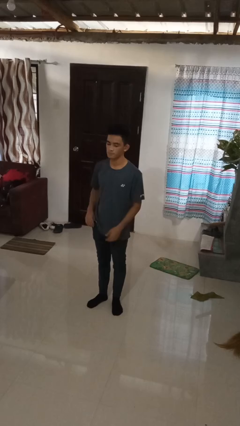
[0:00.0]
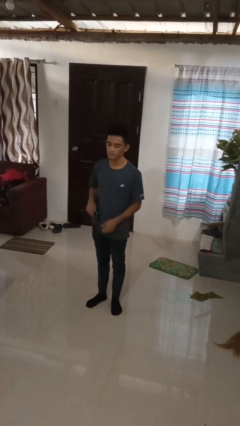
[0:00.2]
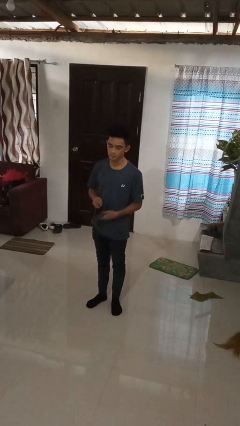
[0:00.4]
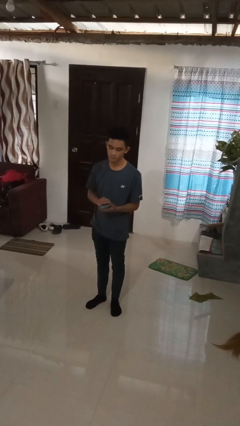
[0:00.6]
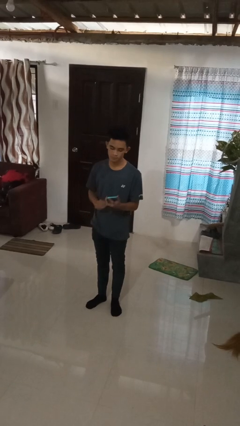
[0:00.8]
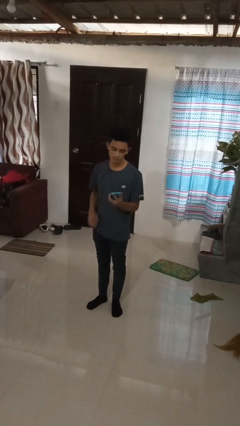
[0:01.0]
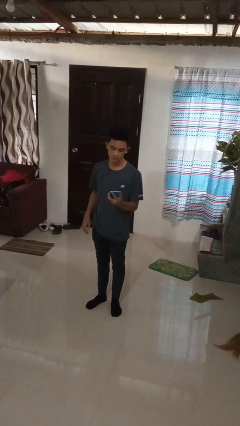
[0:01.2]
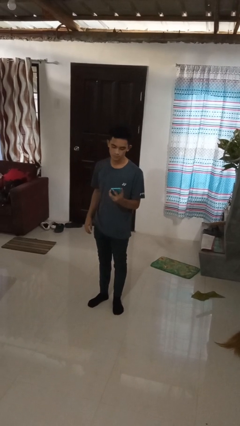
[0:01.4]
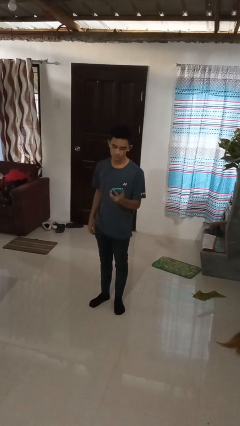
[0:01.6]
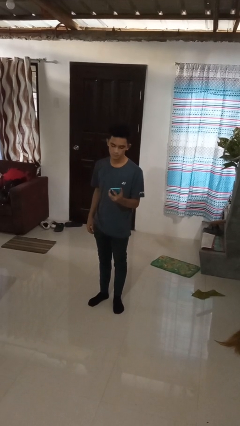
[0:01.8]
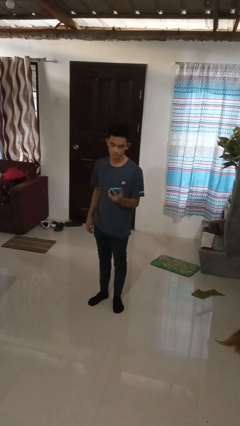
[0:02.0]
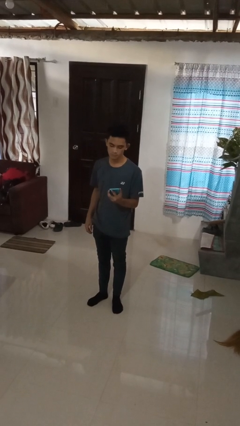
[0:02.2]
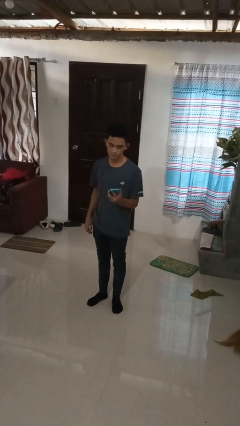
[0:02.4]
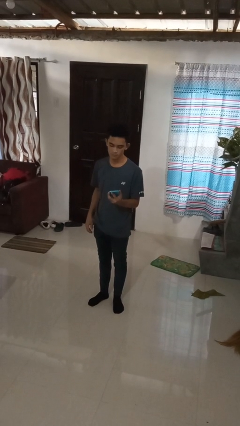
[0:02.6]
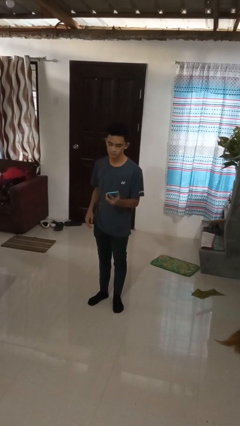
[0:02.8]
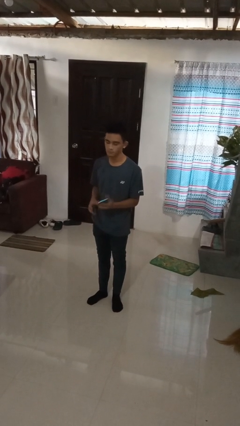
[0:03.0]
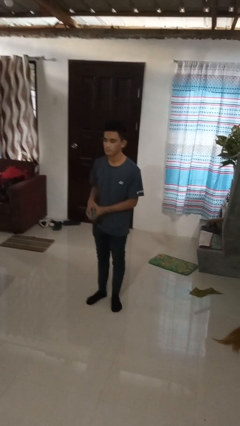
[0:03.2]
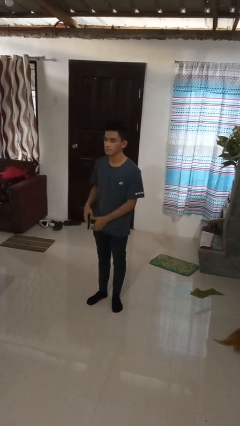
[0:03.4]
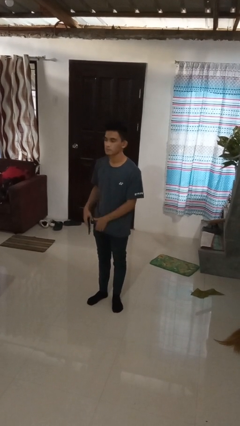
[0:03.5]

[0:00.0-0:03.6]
person takes phone from pocket

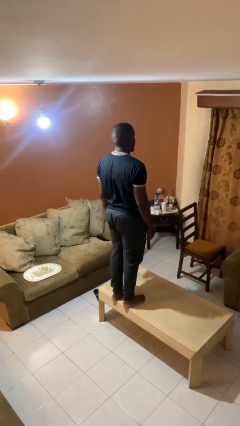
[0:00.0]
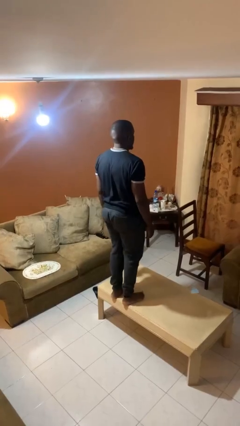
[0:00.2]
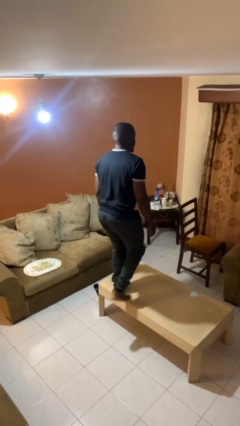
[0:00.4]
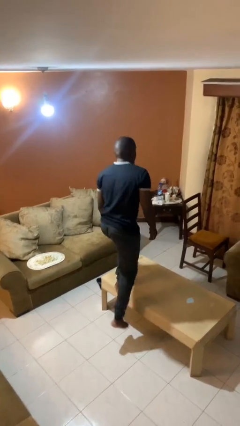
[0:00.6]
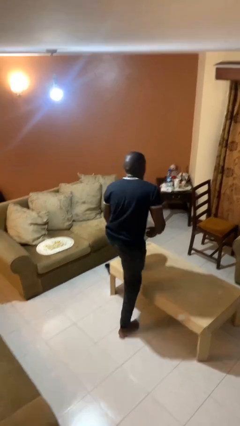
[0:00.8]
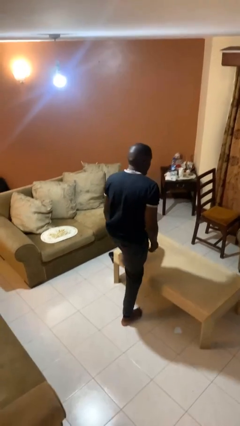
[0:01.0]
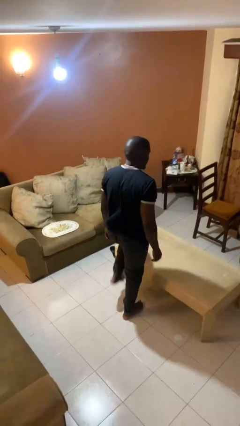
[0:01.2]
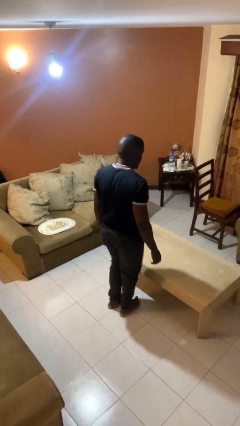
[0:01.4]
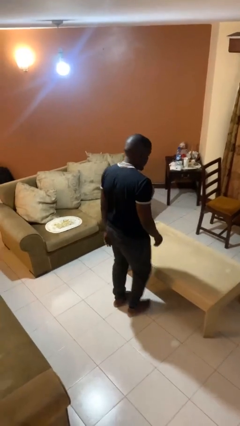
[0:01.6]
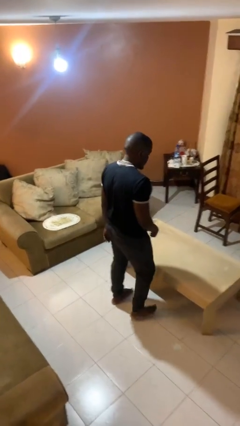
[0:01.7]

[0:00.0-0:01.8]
person climbs off table

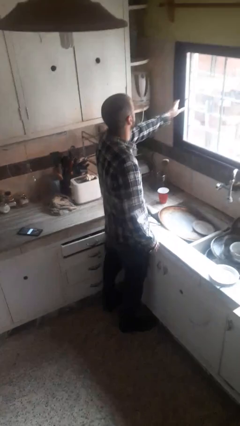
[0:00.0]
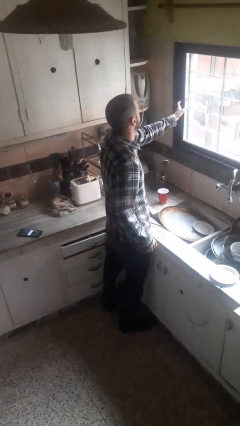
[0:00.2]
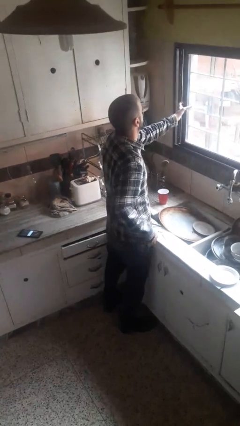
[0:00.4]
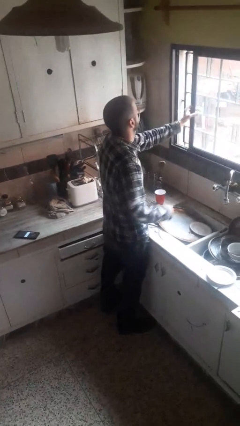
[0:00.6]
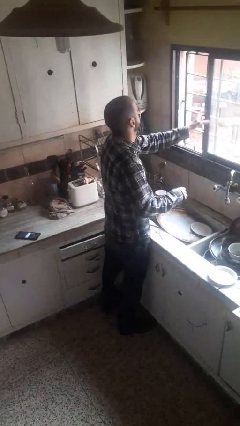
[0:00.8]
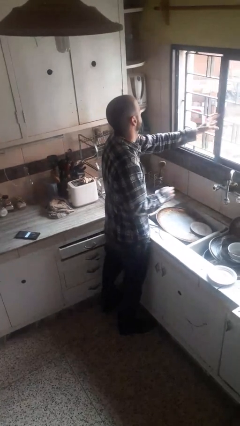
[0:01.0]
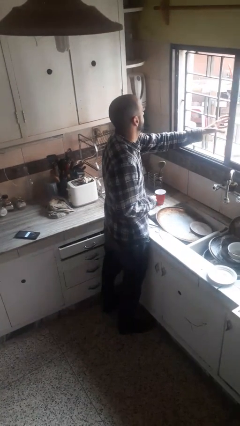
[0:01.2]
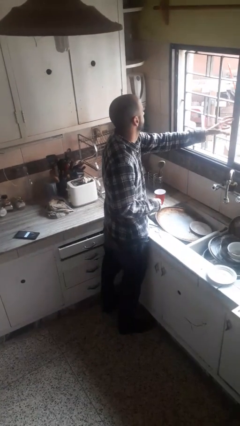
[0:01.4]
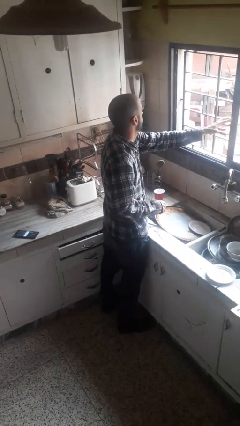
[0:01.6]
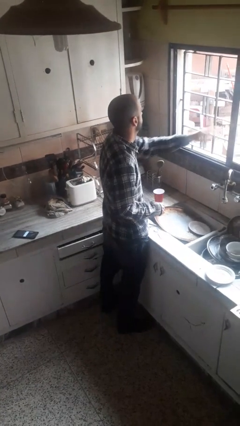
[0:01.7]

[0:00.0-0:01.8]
person opens home window

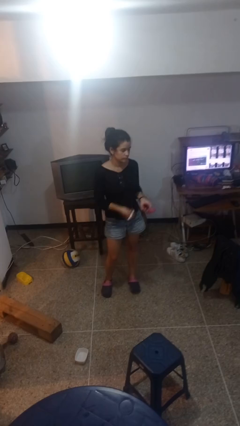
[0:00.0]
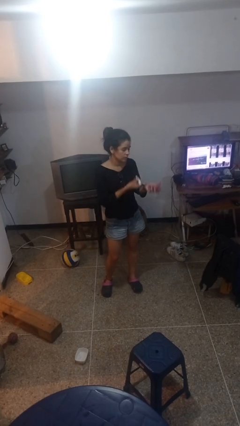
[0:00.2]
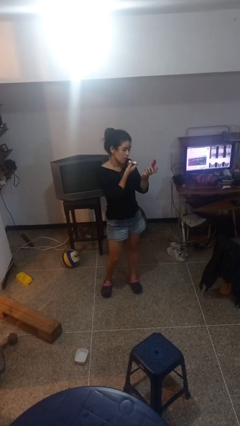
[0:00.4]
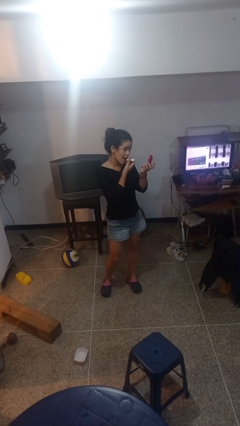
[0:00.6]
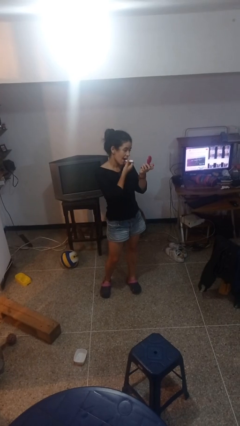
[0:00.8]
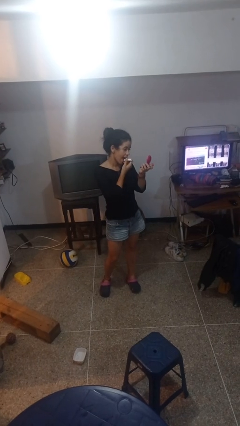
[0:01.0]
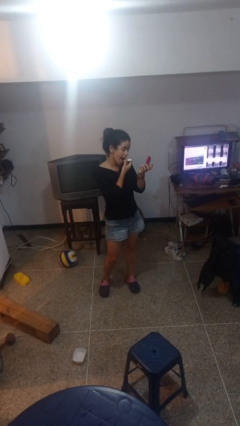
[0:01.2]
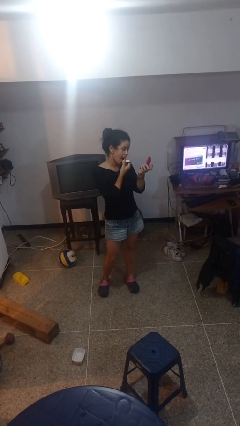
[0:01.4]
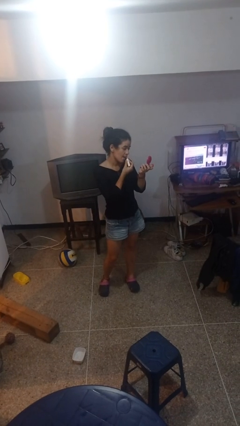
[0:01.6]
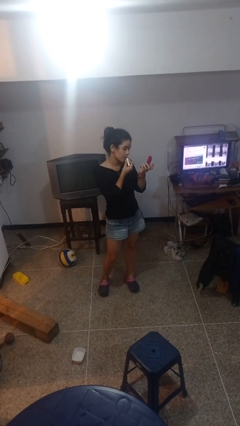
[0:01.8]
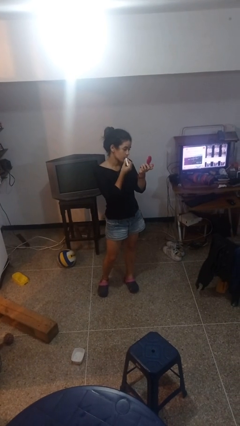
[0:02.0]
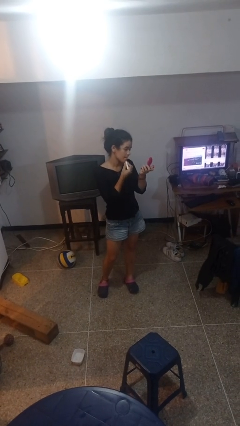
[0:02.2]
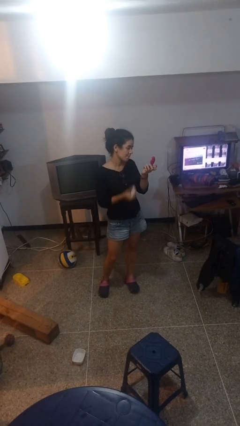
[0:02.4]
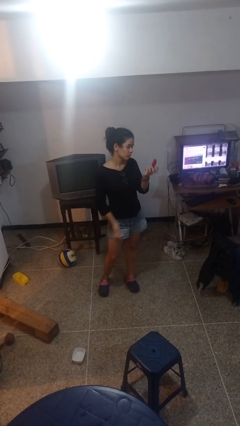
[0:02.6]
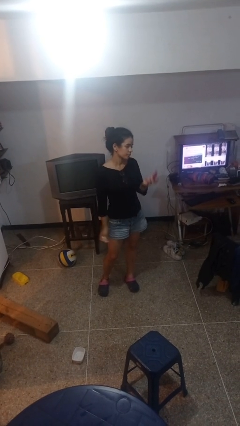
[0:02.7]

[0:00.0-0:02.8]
person applies lip makeup

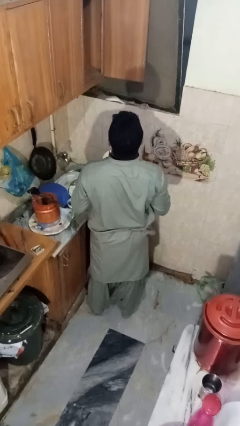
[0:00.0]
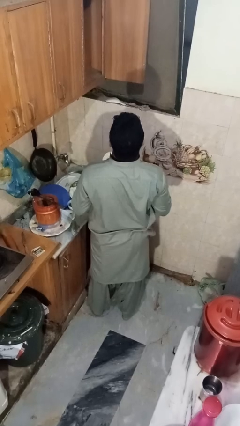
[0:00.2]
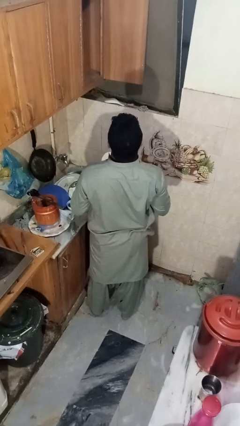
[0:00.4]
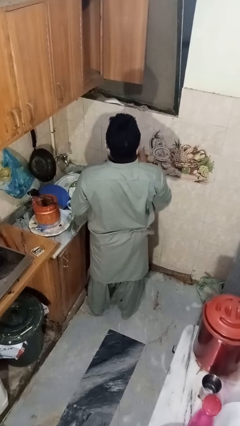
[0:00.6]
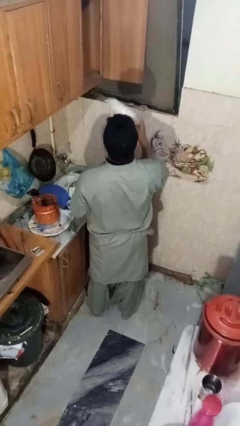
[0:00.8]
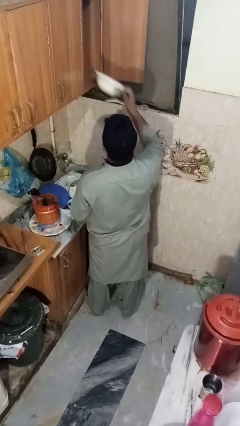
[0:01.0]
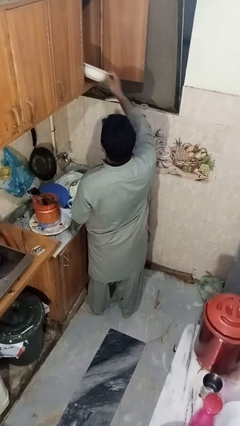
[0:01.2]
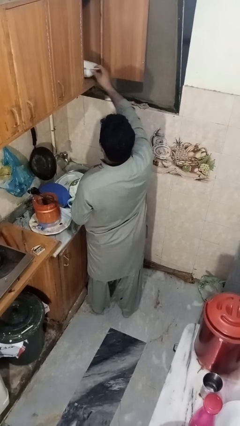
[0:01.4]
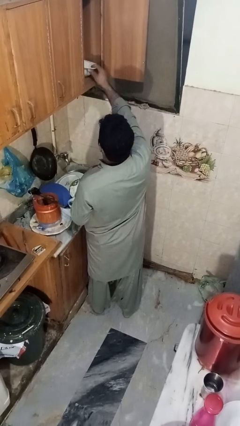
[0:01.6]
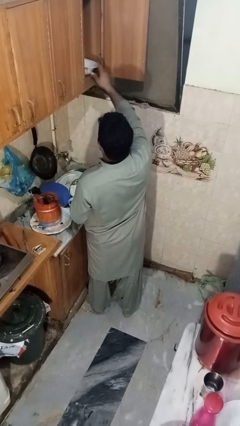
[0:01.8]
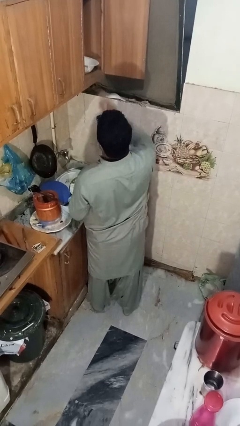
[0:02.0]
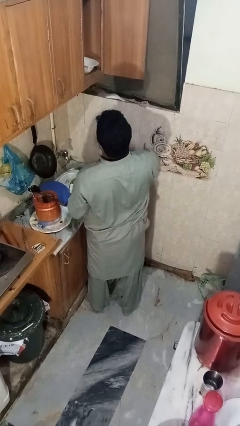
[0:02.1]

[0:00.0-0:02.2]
person puts object in cabinet

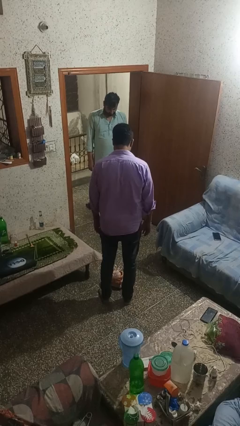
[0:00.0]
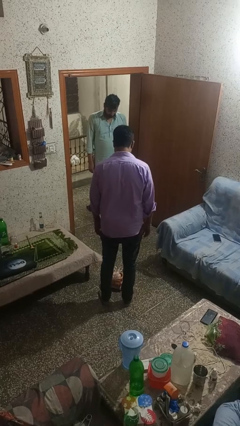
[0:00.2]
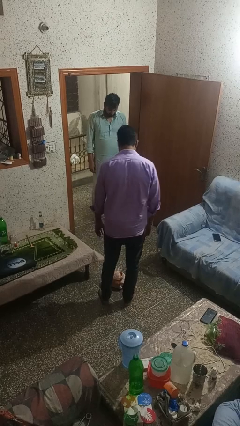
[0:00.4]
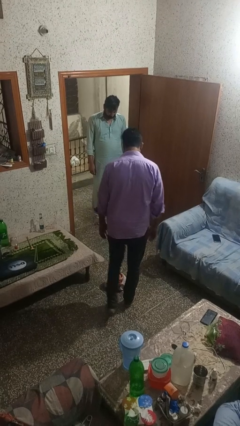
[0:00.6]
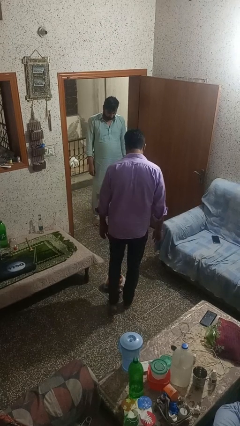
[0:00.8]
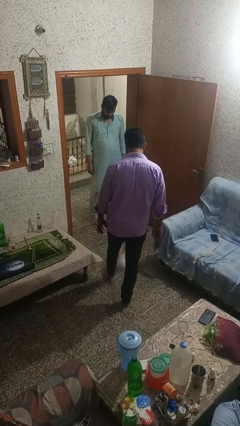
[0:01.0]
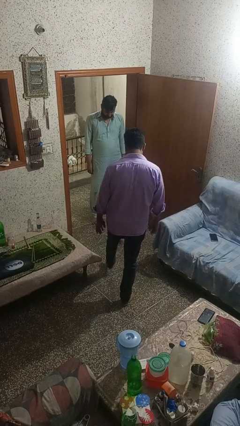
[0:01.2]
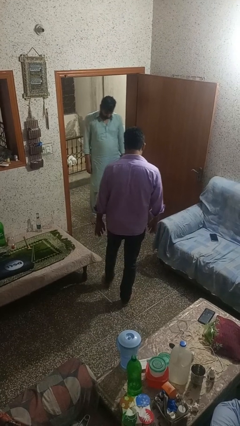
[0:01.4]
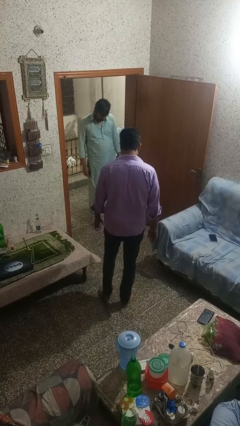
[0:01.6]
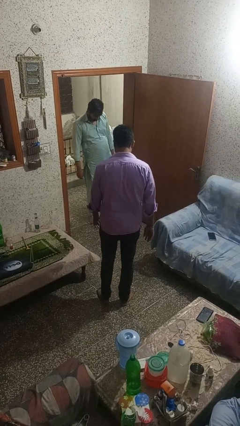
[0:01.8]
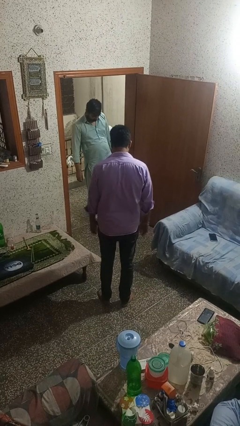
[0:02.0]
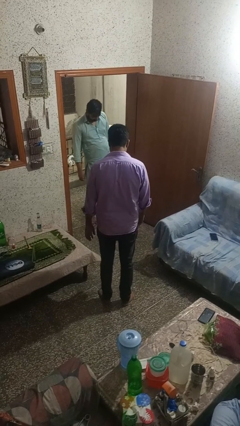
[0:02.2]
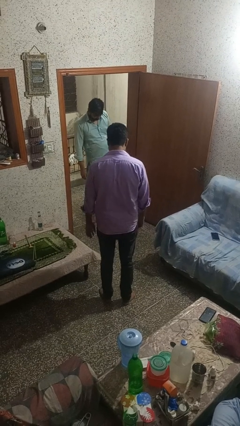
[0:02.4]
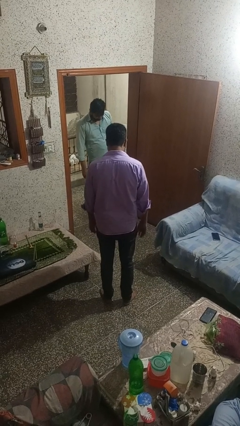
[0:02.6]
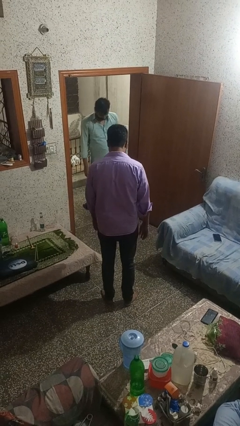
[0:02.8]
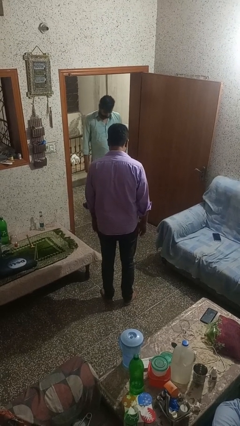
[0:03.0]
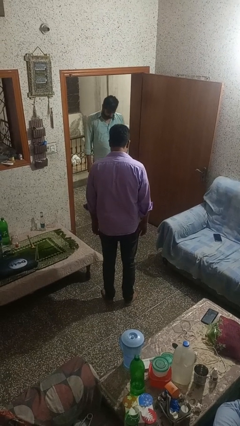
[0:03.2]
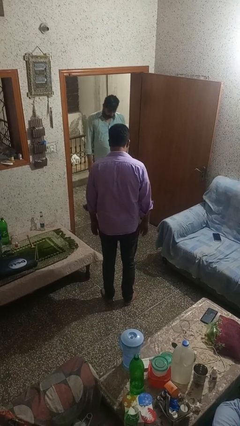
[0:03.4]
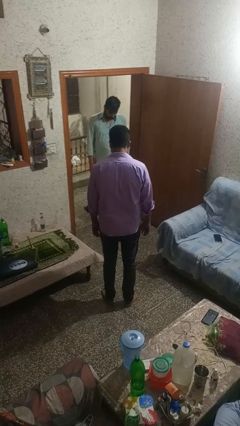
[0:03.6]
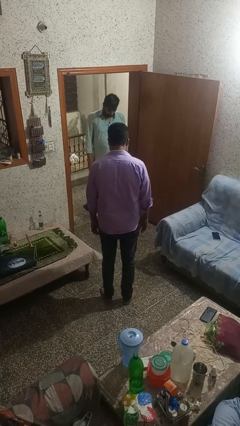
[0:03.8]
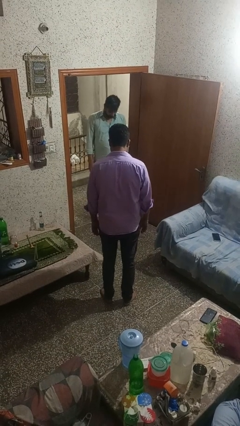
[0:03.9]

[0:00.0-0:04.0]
person kicks object to person

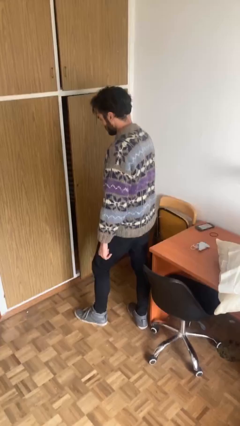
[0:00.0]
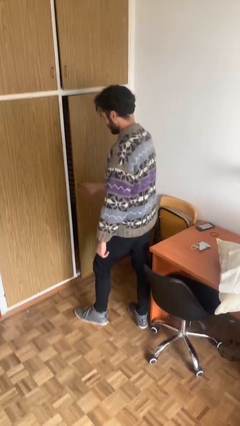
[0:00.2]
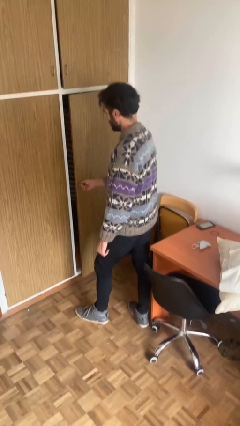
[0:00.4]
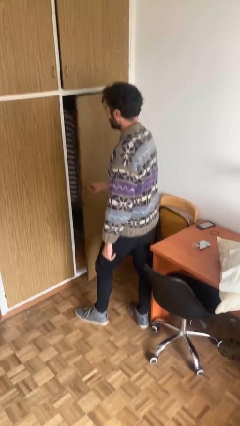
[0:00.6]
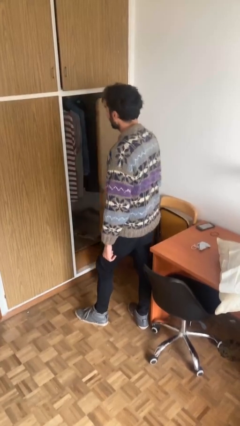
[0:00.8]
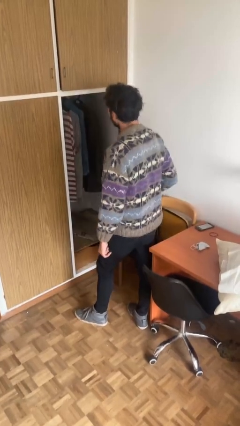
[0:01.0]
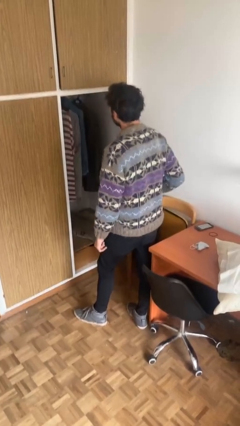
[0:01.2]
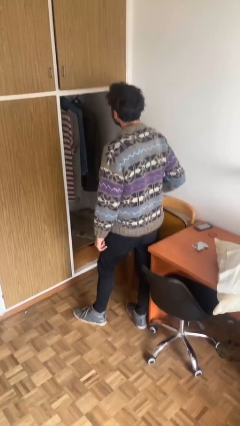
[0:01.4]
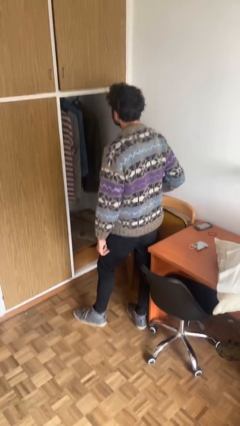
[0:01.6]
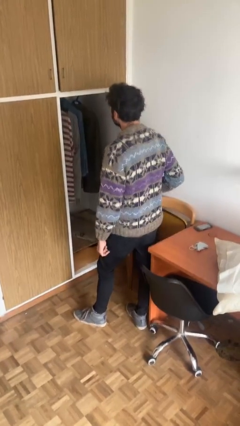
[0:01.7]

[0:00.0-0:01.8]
person opens closet door
